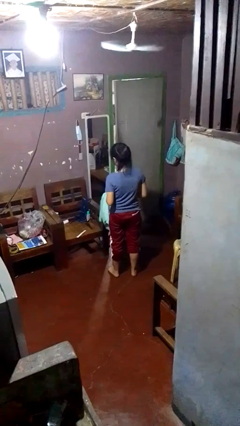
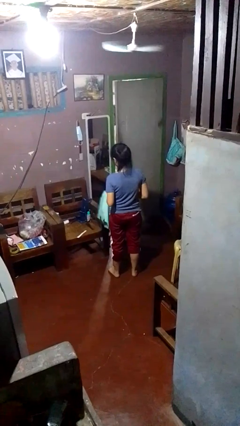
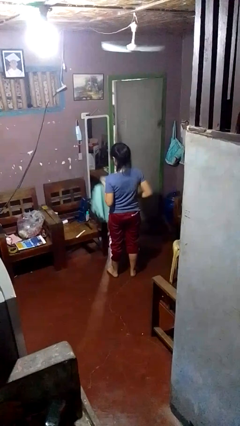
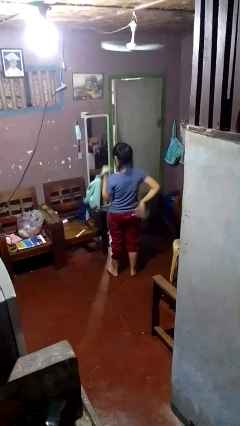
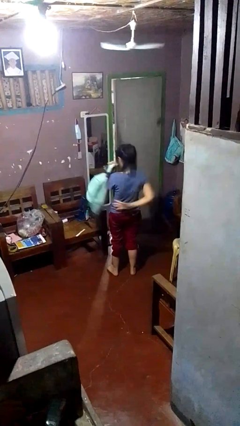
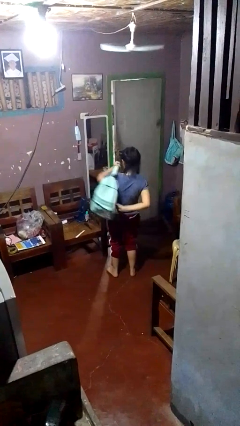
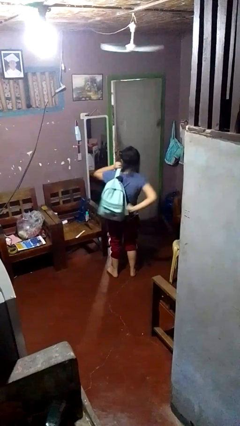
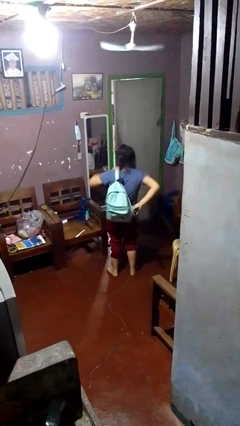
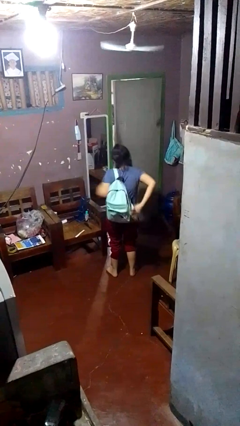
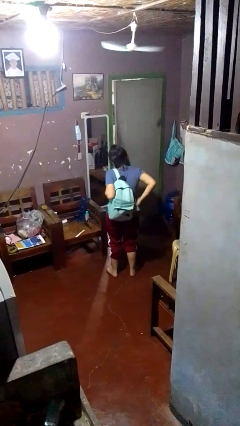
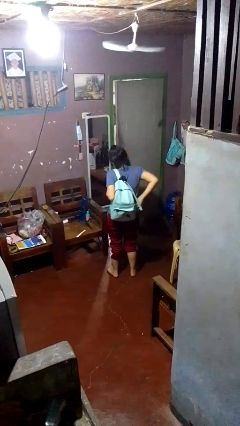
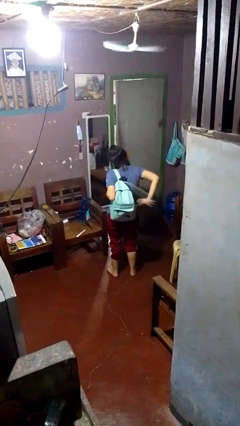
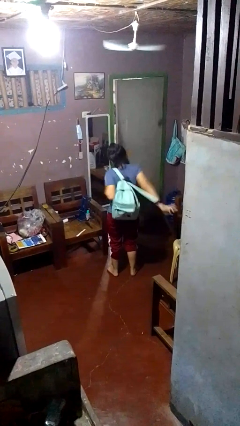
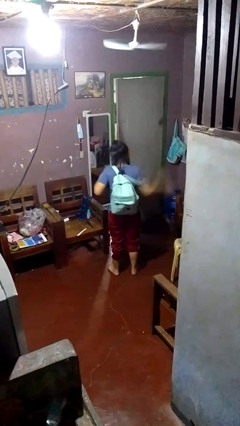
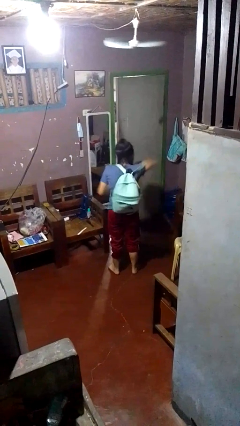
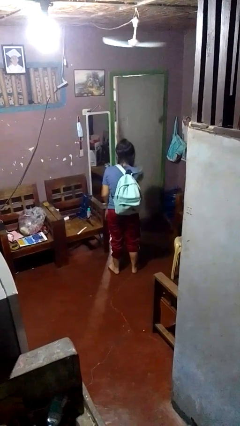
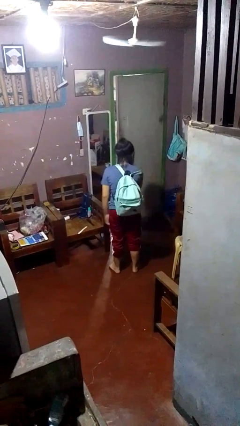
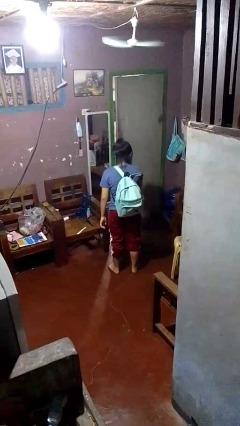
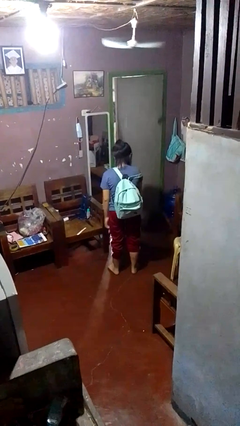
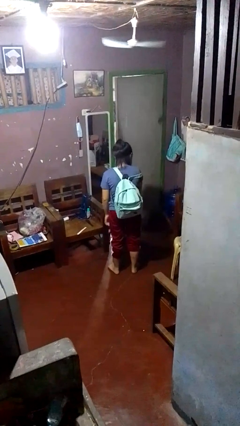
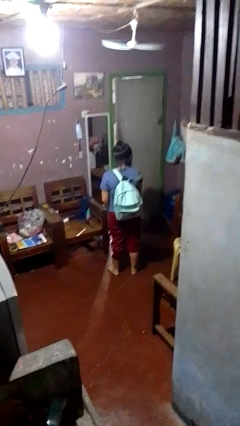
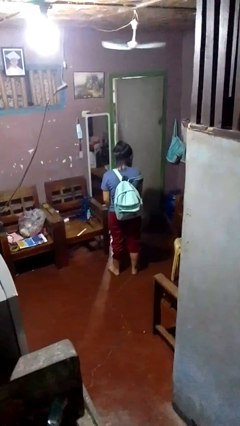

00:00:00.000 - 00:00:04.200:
person puts on backpack

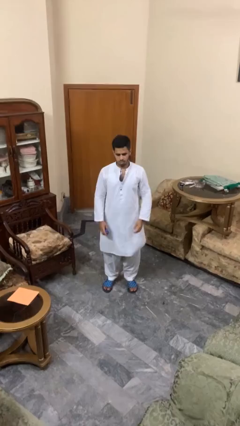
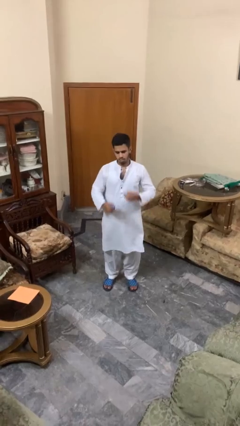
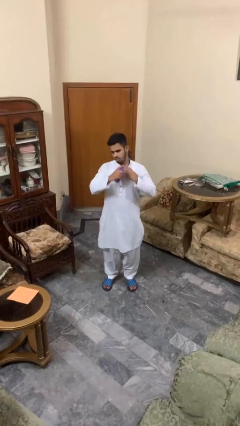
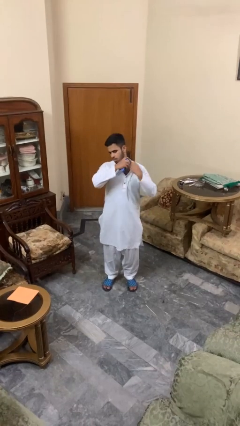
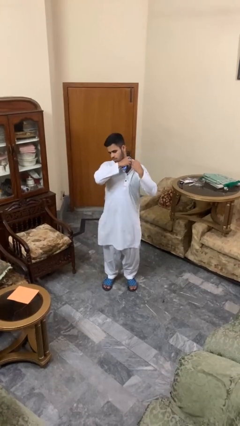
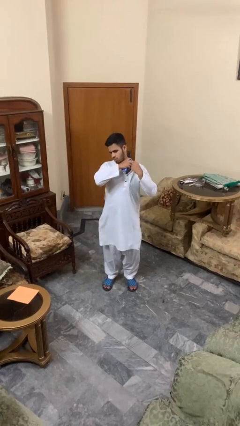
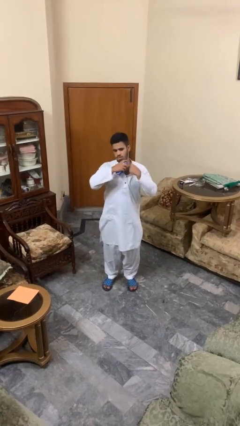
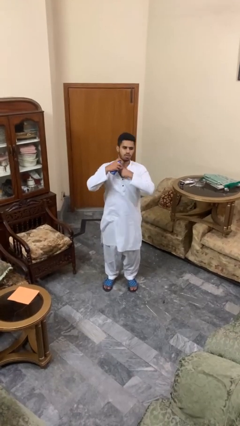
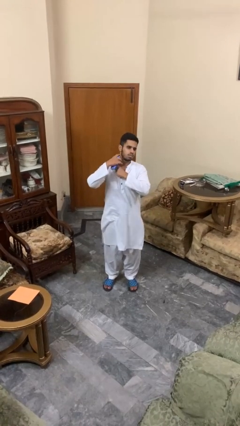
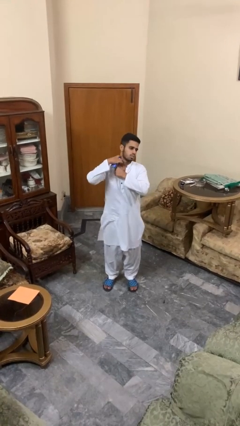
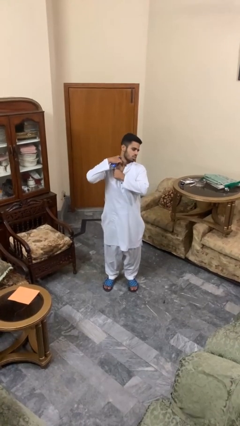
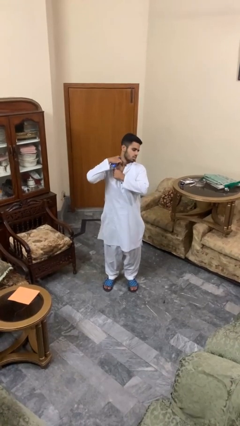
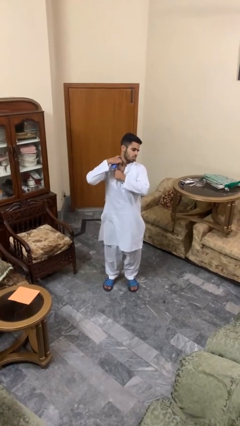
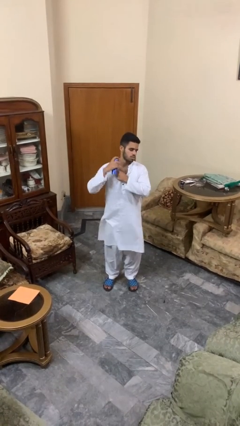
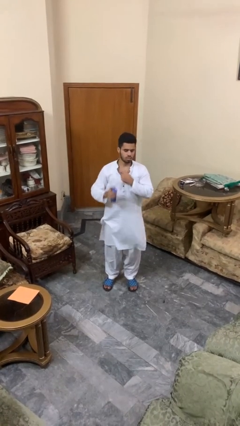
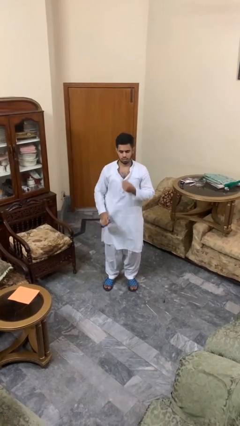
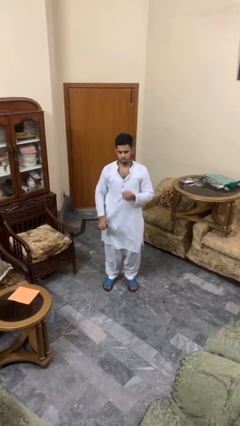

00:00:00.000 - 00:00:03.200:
person applies deodorant

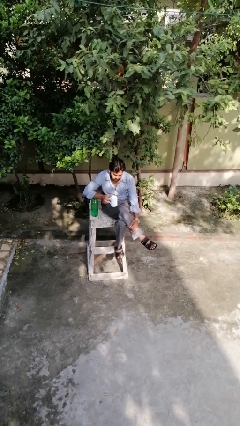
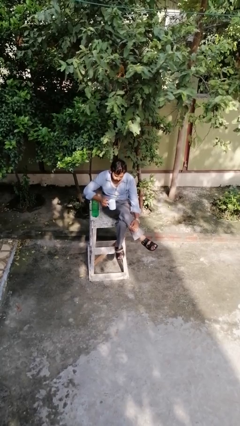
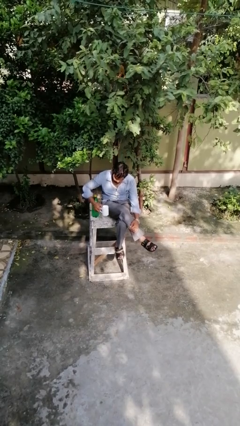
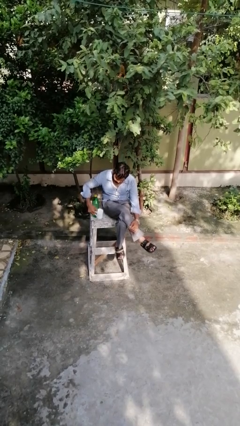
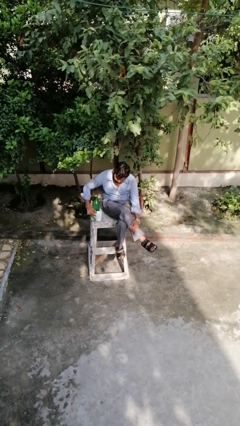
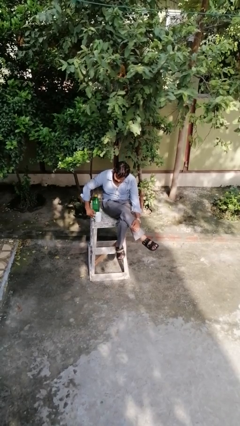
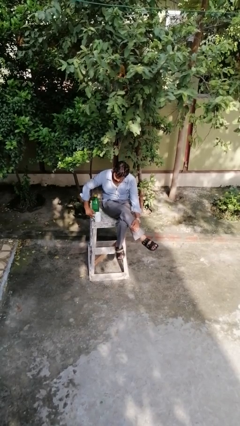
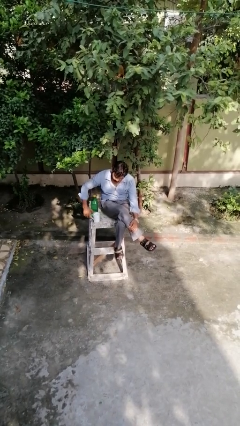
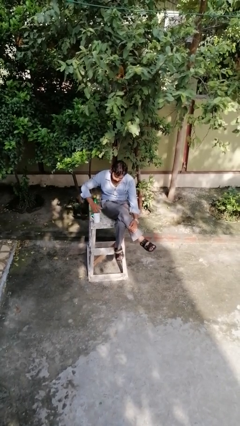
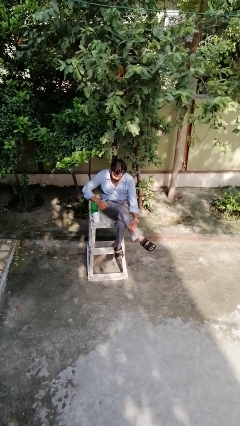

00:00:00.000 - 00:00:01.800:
person puts down object on table

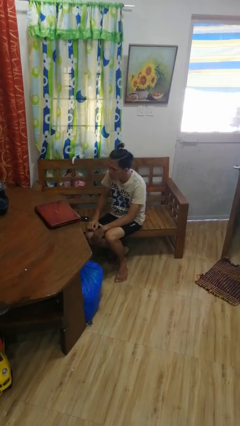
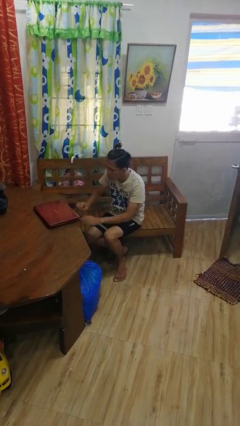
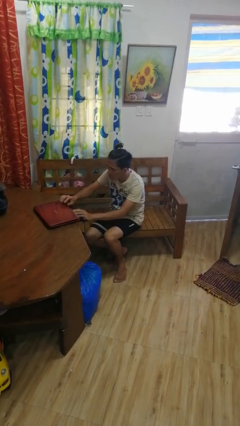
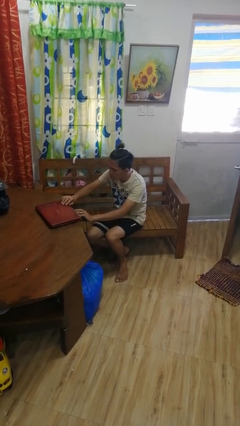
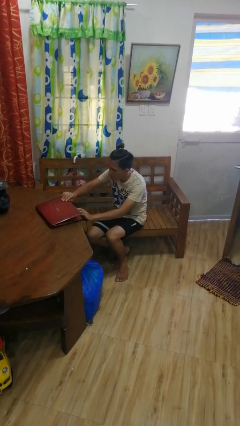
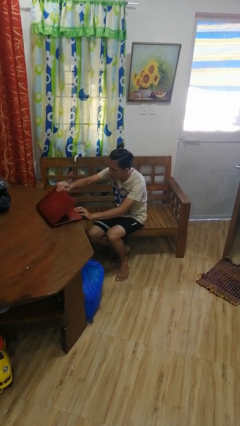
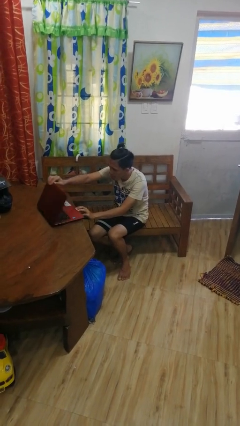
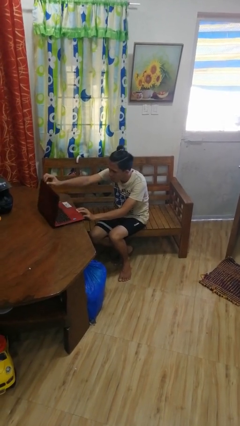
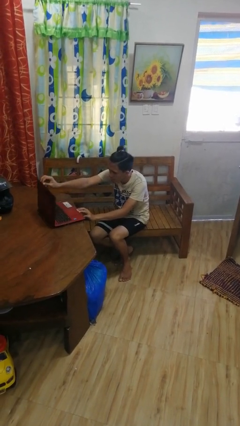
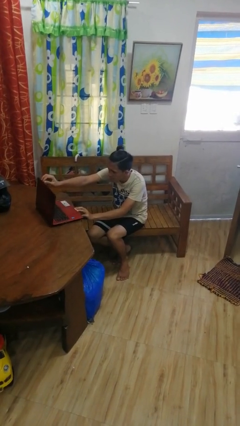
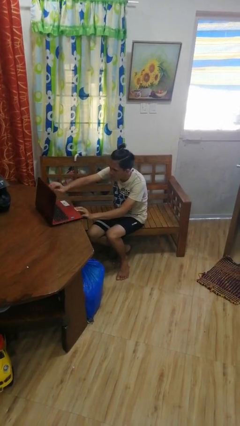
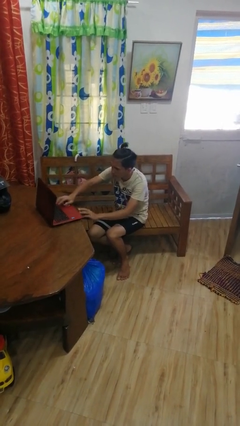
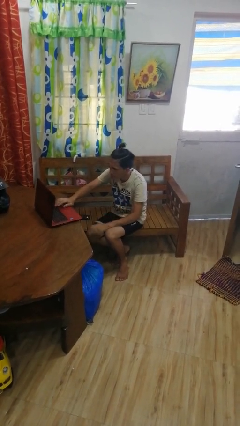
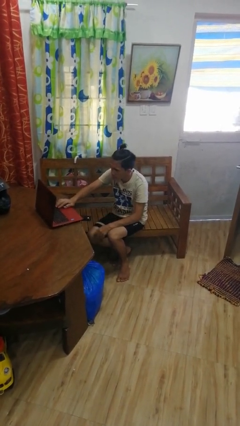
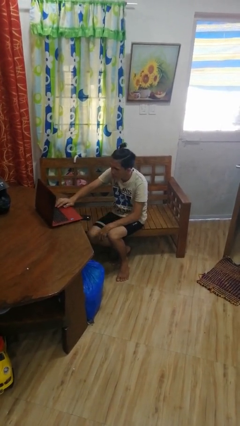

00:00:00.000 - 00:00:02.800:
person opens laptop

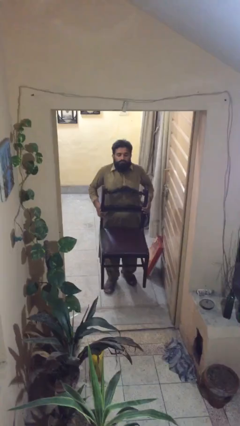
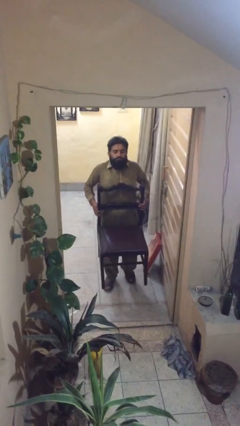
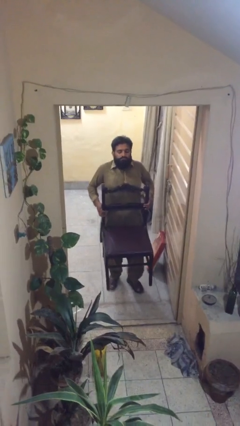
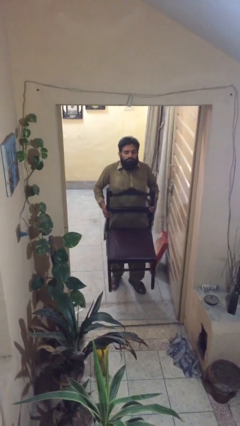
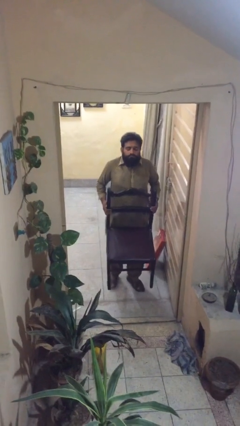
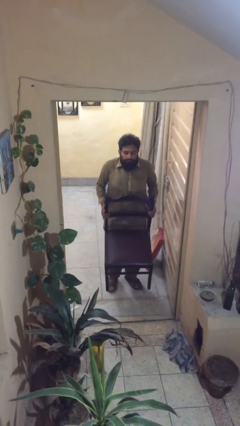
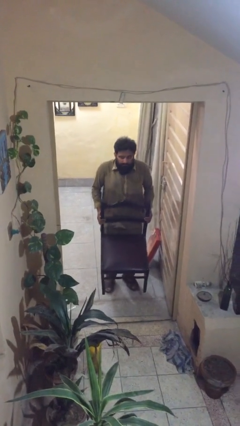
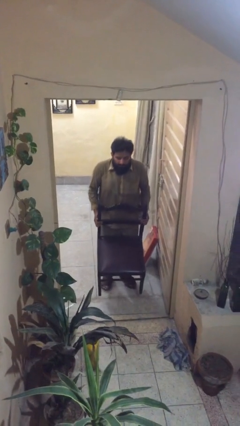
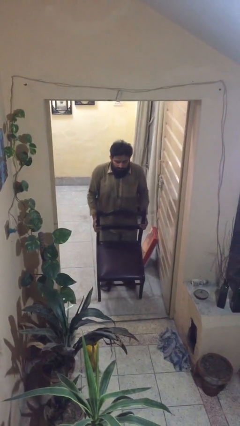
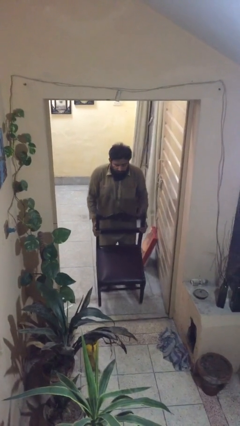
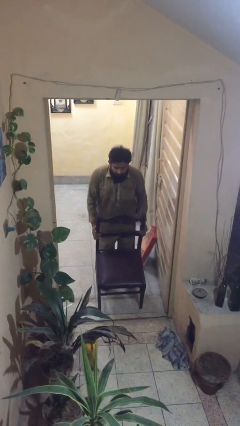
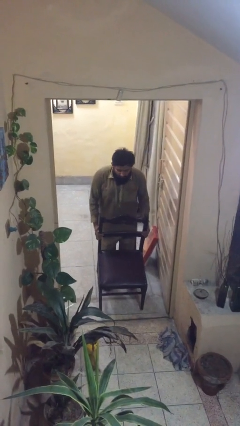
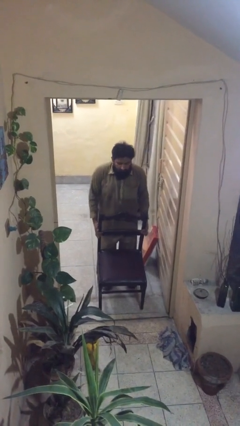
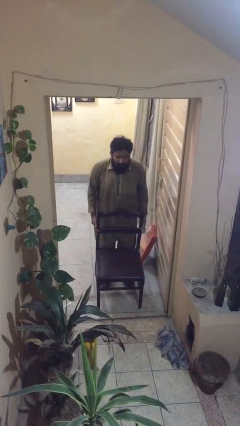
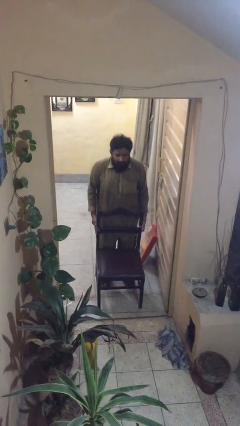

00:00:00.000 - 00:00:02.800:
person puts down object on floor

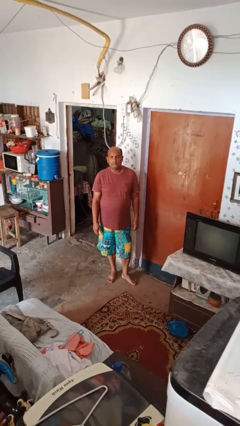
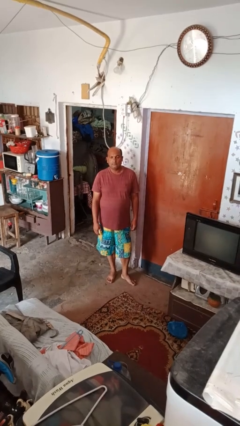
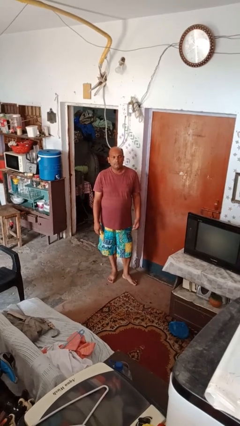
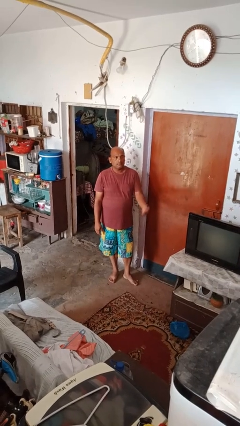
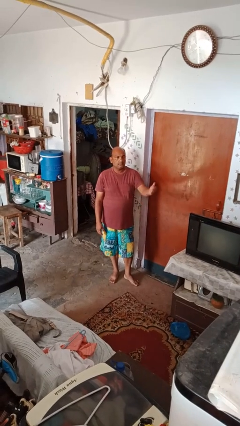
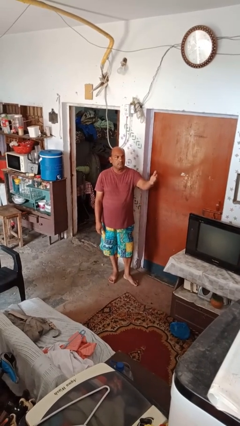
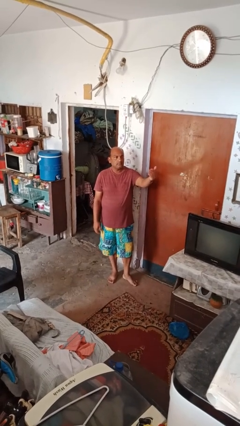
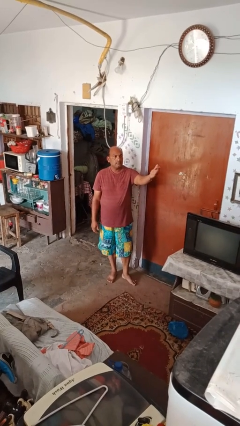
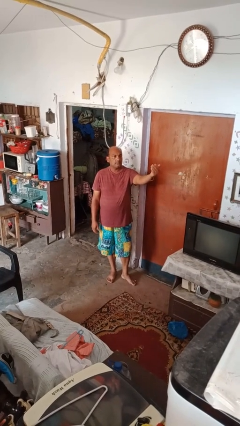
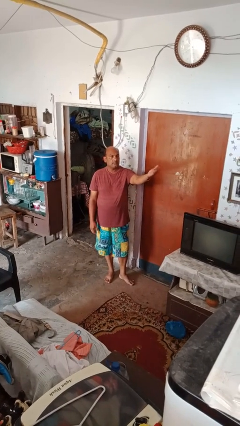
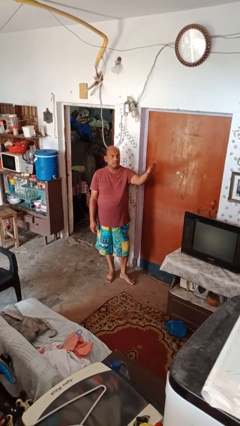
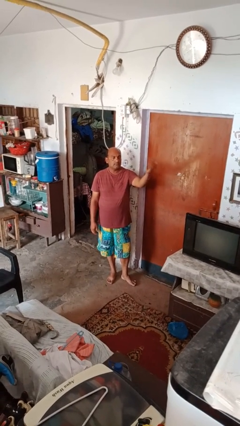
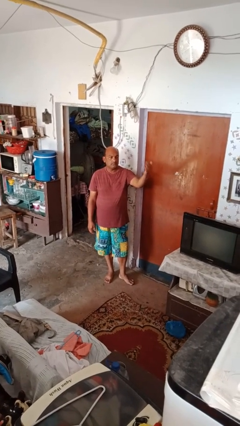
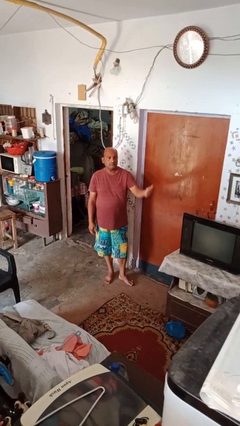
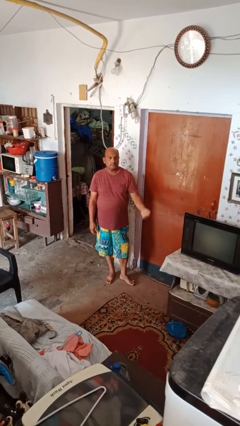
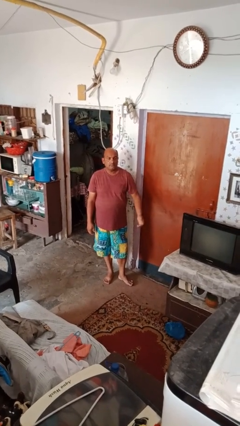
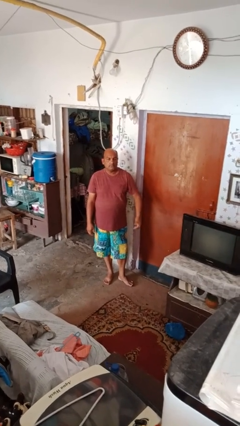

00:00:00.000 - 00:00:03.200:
person gestures come here
